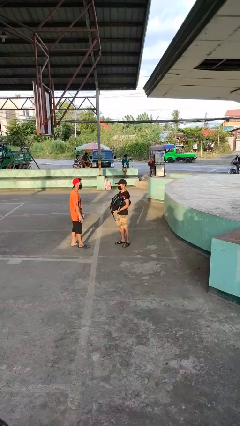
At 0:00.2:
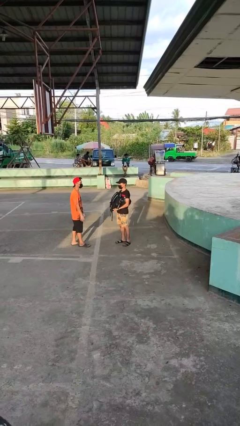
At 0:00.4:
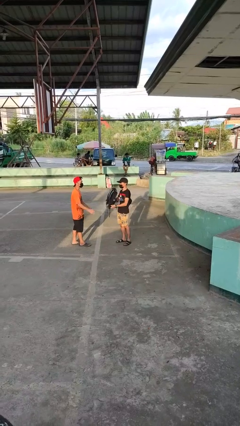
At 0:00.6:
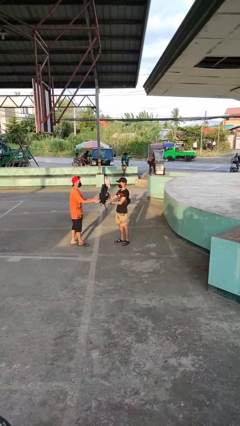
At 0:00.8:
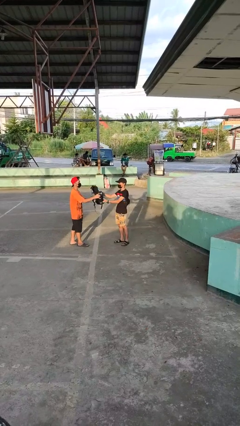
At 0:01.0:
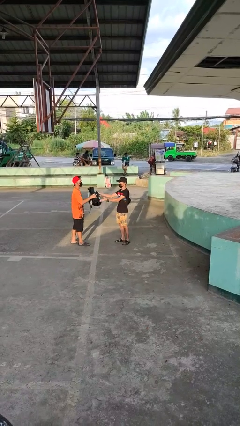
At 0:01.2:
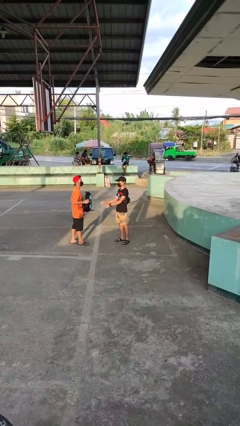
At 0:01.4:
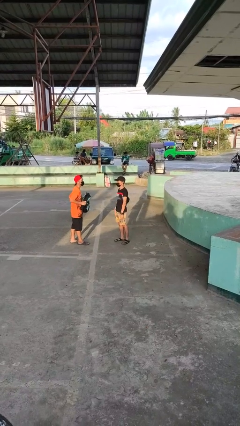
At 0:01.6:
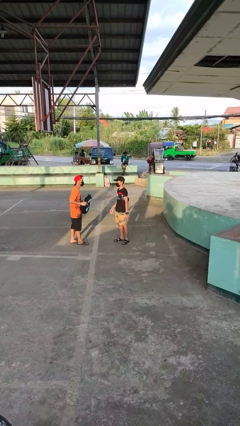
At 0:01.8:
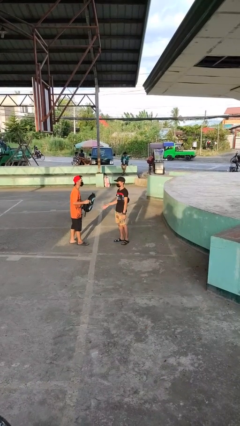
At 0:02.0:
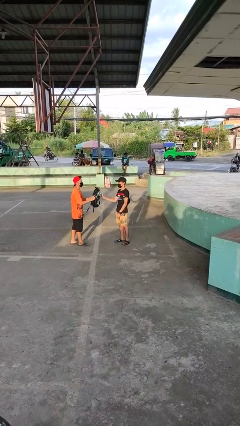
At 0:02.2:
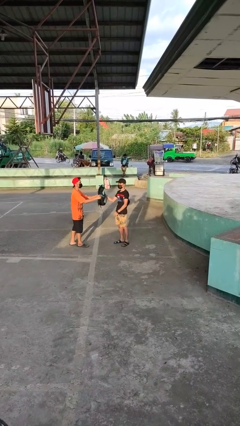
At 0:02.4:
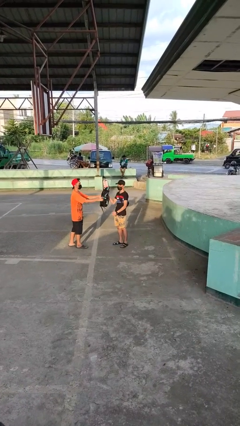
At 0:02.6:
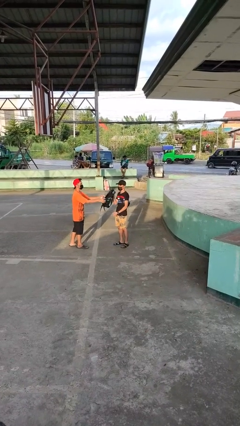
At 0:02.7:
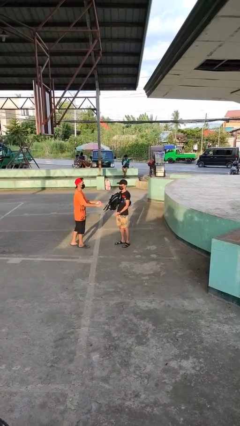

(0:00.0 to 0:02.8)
person transfers object to person

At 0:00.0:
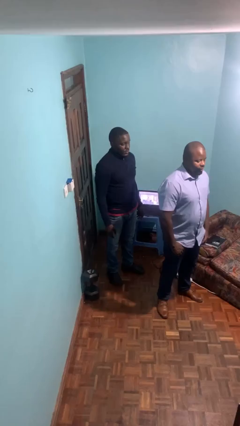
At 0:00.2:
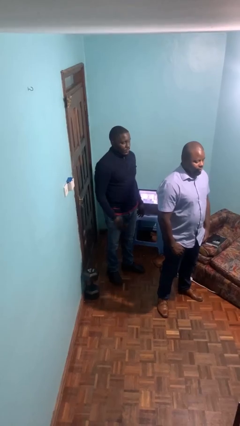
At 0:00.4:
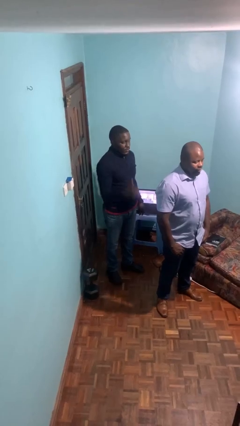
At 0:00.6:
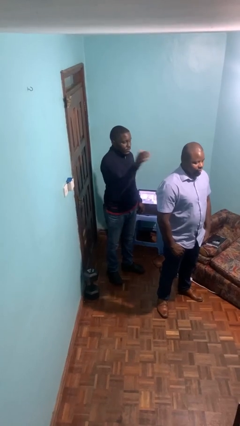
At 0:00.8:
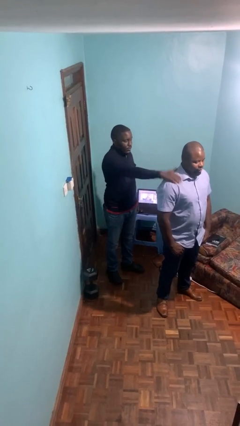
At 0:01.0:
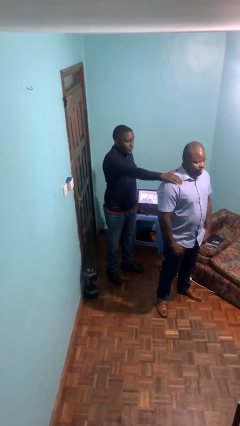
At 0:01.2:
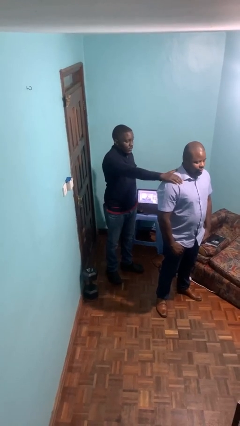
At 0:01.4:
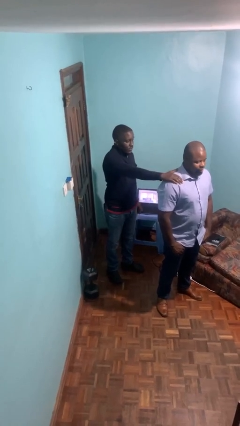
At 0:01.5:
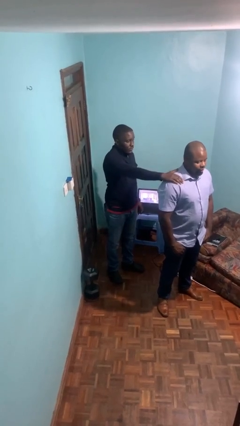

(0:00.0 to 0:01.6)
person grabs person by shoulder

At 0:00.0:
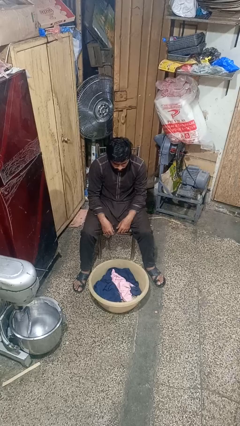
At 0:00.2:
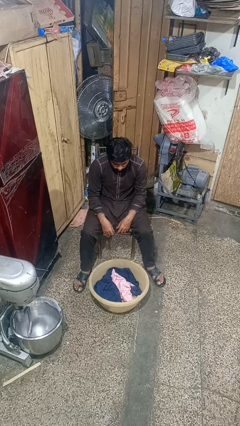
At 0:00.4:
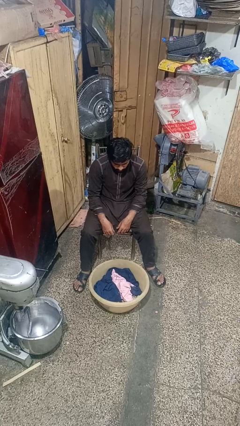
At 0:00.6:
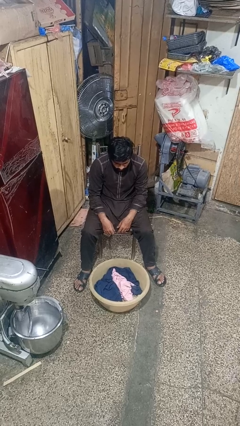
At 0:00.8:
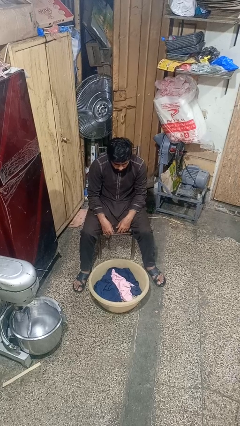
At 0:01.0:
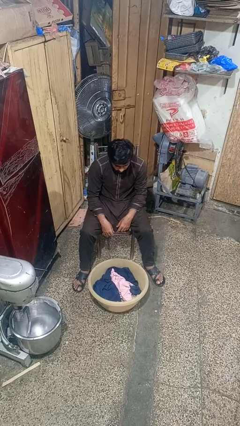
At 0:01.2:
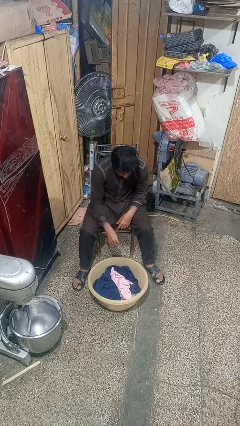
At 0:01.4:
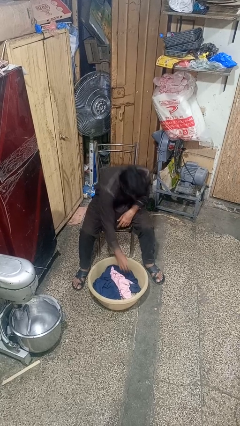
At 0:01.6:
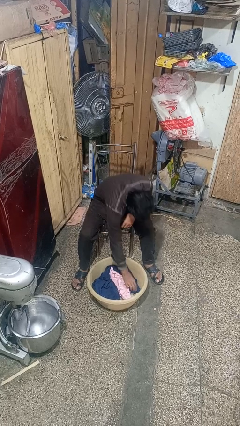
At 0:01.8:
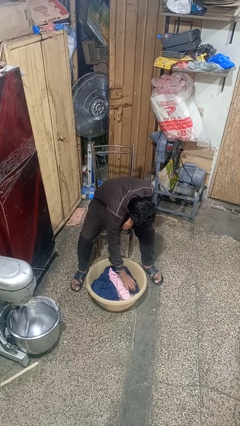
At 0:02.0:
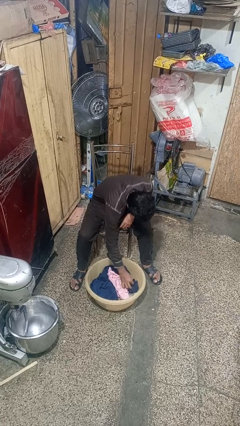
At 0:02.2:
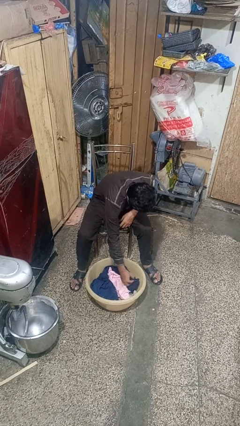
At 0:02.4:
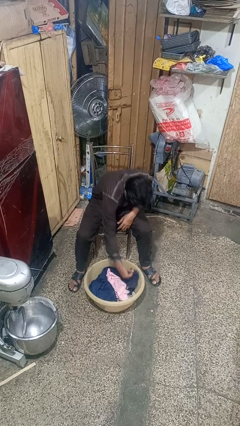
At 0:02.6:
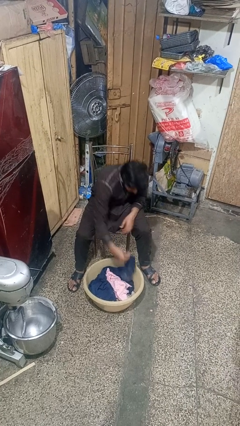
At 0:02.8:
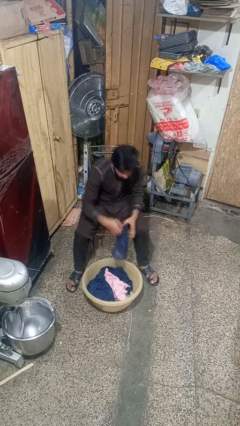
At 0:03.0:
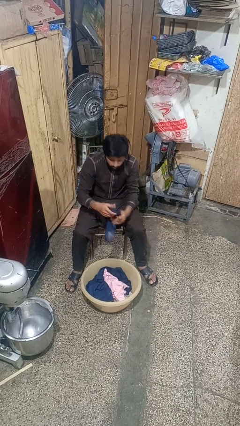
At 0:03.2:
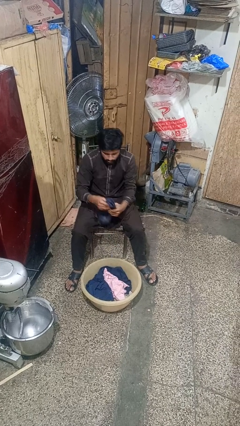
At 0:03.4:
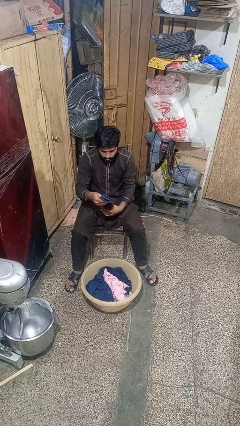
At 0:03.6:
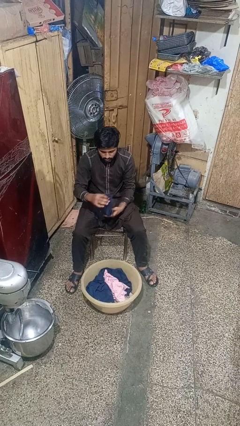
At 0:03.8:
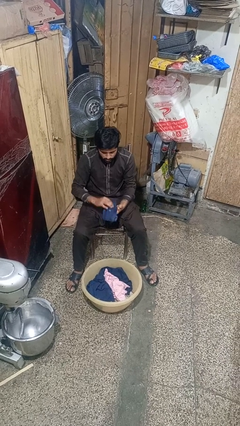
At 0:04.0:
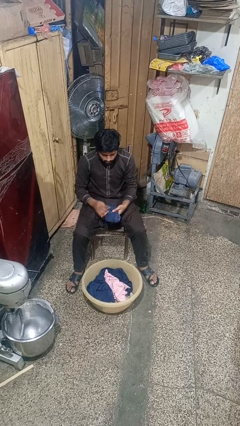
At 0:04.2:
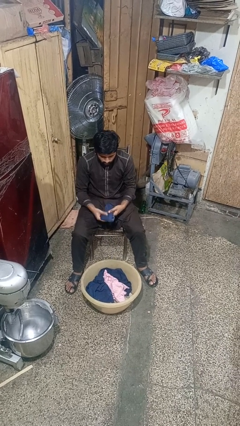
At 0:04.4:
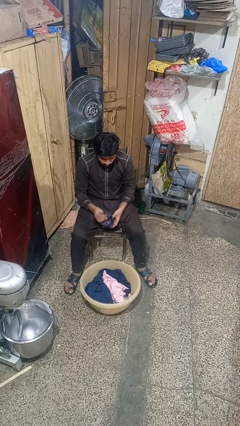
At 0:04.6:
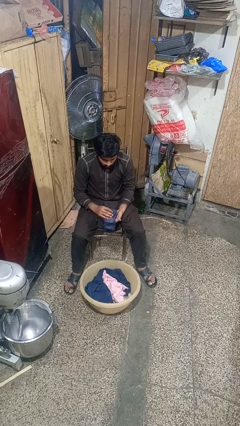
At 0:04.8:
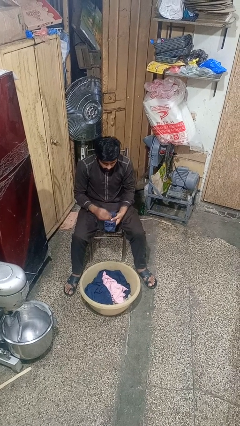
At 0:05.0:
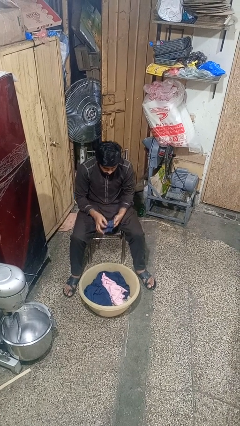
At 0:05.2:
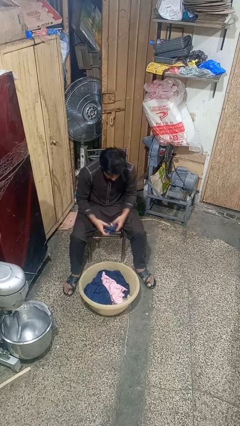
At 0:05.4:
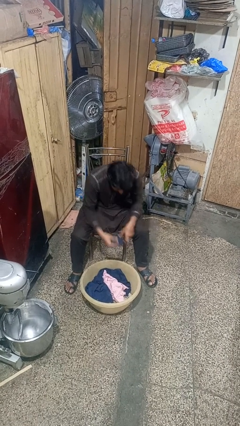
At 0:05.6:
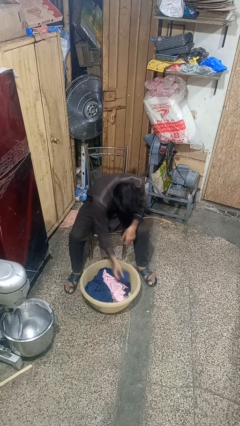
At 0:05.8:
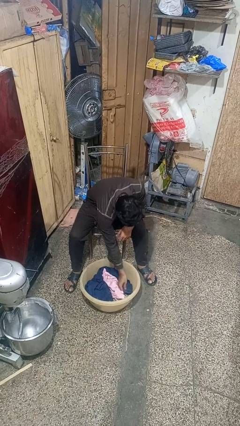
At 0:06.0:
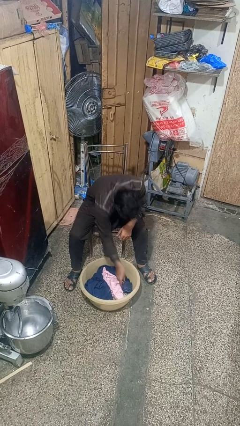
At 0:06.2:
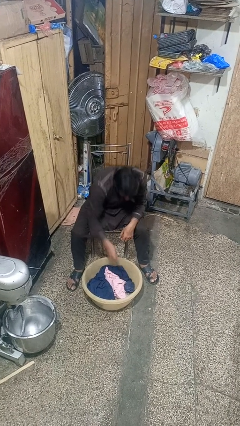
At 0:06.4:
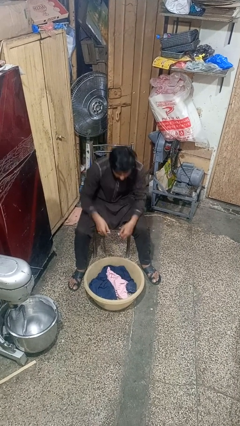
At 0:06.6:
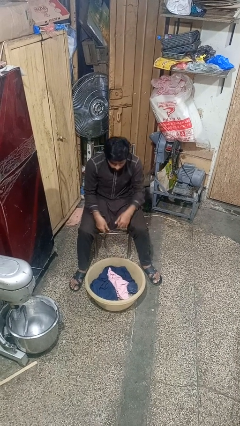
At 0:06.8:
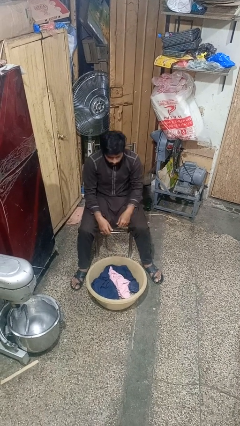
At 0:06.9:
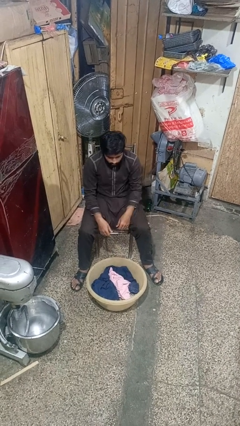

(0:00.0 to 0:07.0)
person folds socks

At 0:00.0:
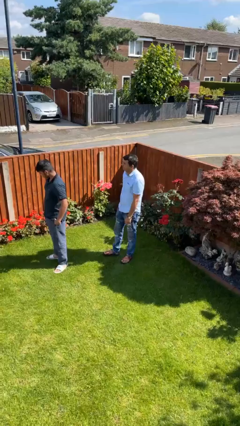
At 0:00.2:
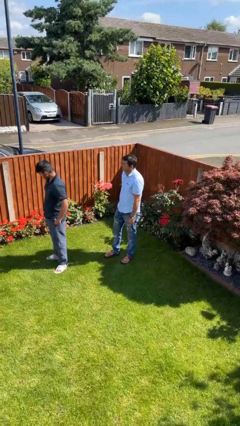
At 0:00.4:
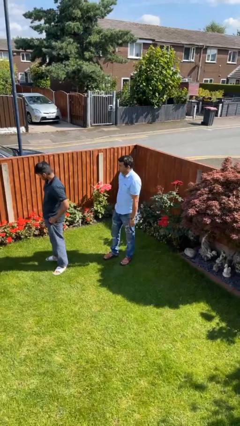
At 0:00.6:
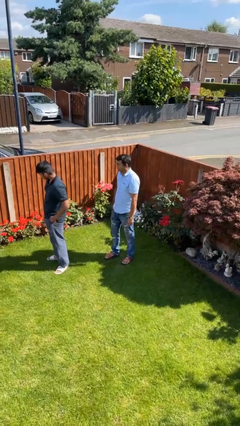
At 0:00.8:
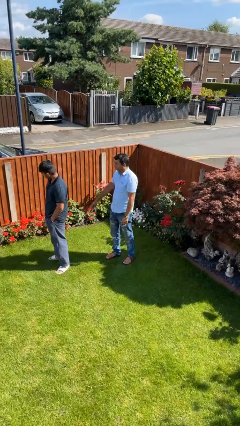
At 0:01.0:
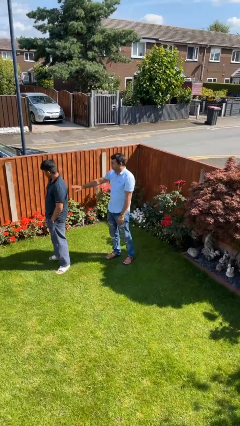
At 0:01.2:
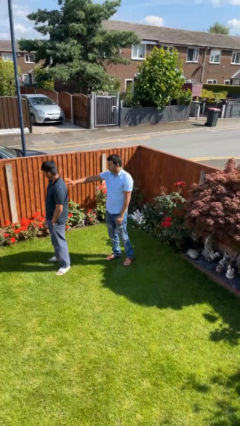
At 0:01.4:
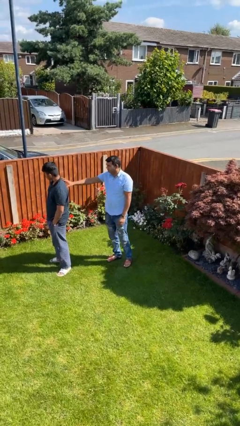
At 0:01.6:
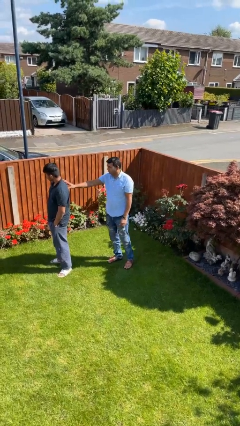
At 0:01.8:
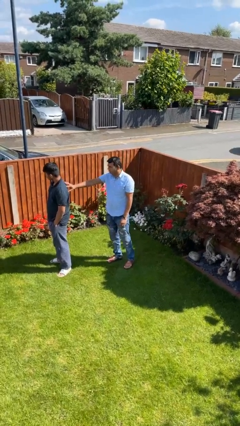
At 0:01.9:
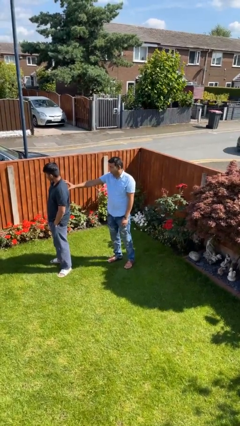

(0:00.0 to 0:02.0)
person touches back of person

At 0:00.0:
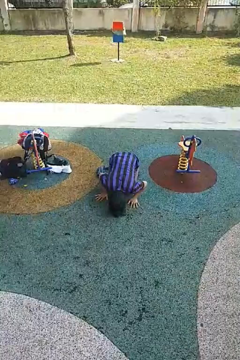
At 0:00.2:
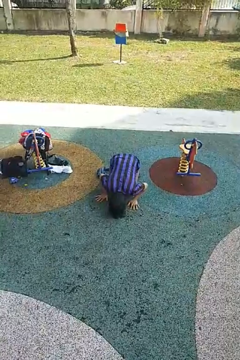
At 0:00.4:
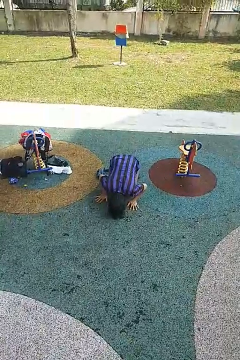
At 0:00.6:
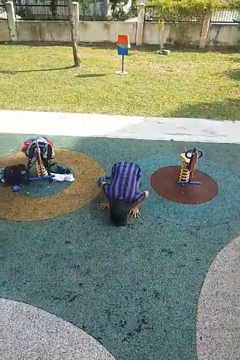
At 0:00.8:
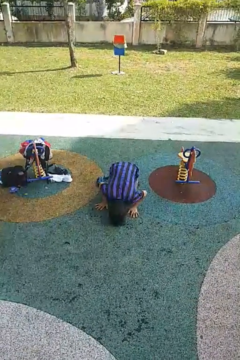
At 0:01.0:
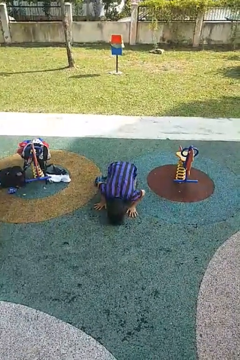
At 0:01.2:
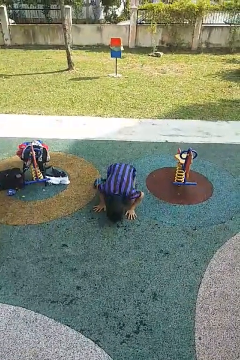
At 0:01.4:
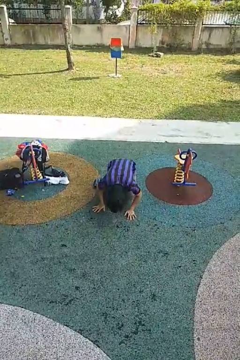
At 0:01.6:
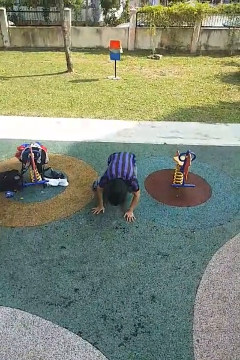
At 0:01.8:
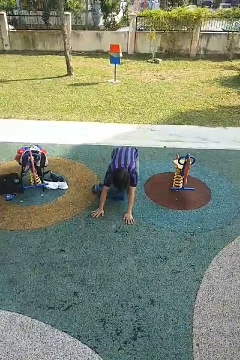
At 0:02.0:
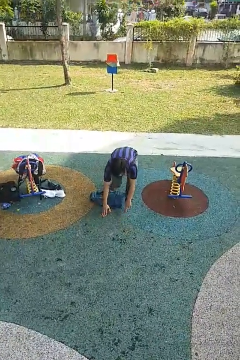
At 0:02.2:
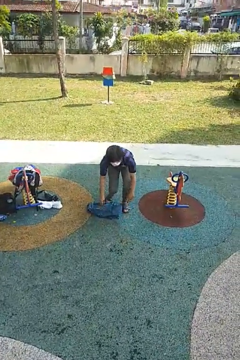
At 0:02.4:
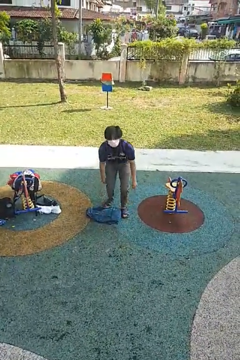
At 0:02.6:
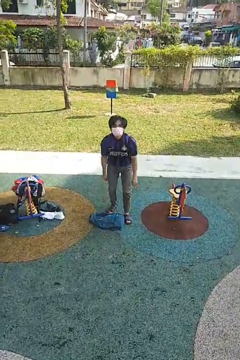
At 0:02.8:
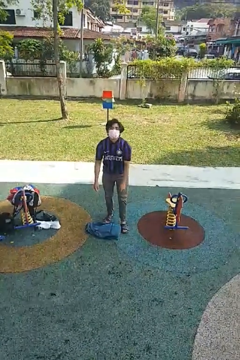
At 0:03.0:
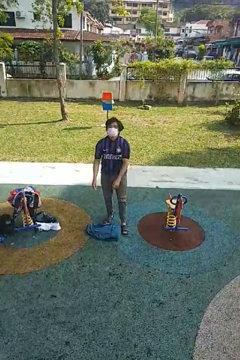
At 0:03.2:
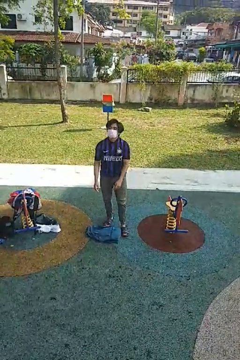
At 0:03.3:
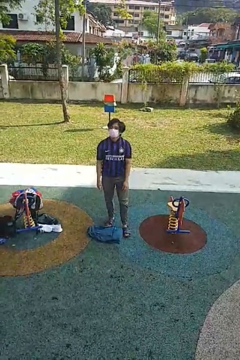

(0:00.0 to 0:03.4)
person stands up from floor

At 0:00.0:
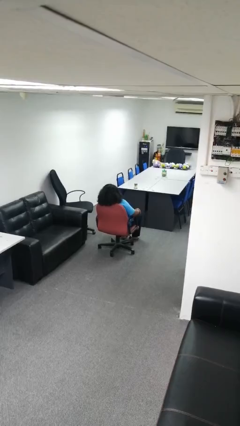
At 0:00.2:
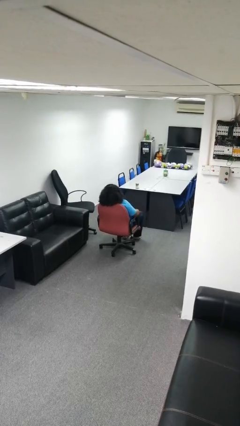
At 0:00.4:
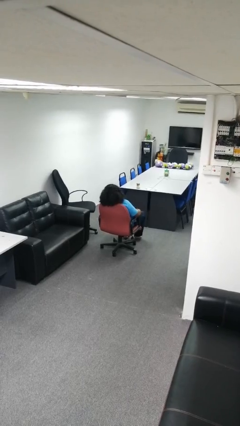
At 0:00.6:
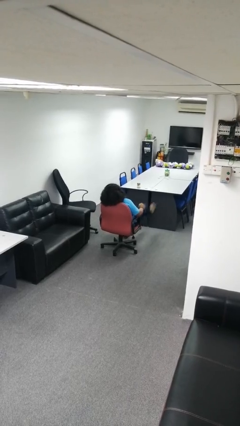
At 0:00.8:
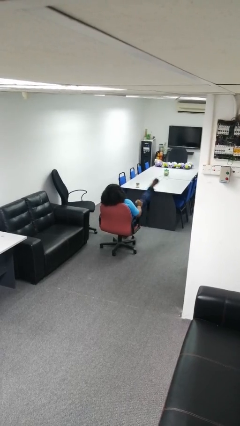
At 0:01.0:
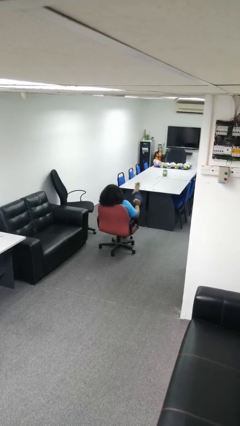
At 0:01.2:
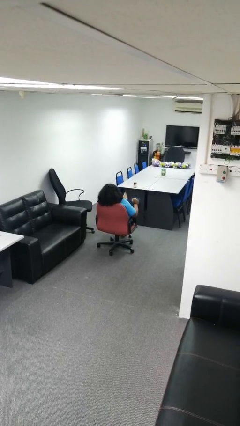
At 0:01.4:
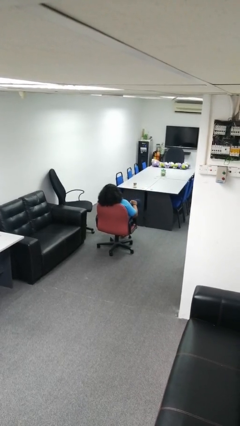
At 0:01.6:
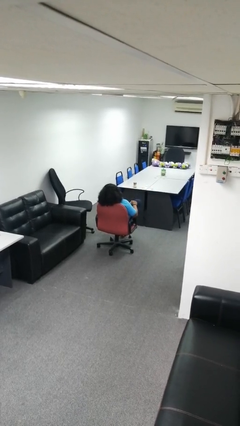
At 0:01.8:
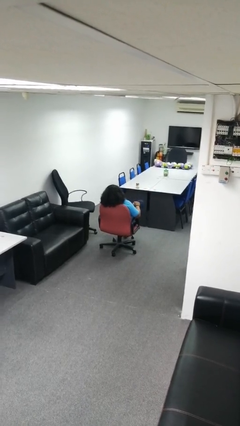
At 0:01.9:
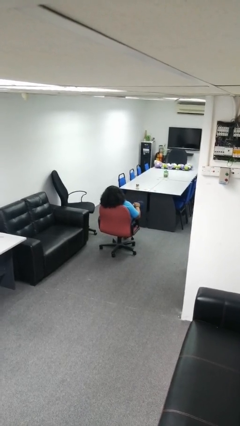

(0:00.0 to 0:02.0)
person crosses legs
